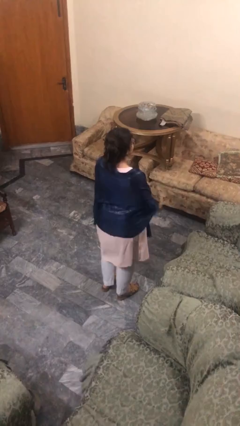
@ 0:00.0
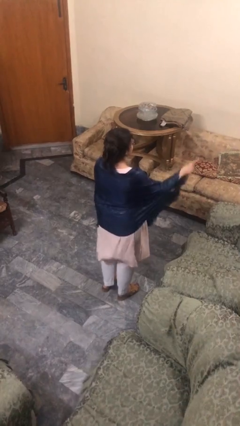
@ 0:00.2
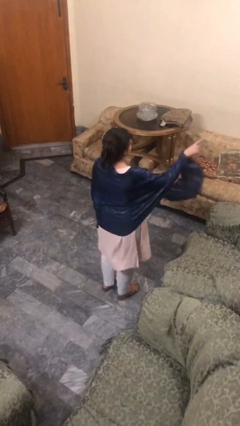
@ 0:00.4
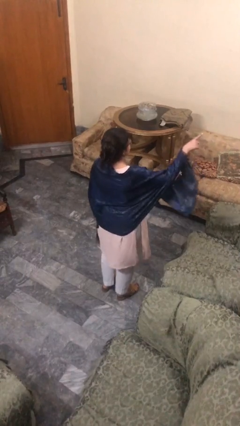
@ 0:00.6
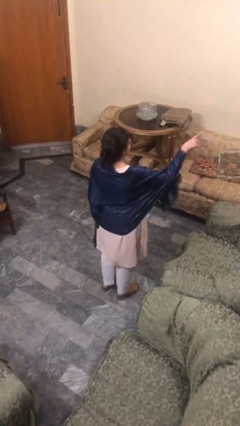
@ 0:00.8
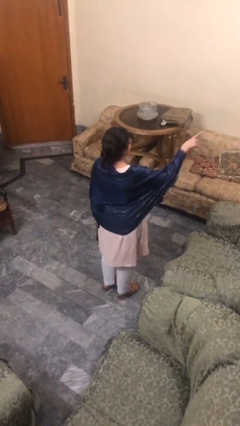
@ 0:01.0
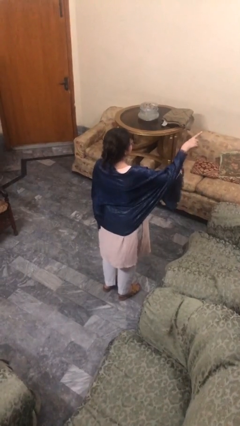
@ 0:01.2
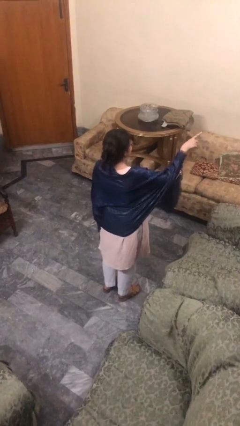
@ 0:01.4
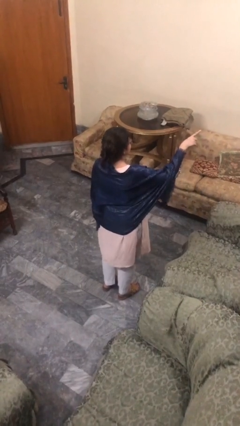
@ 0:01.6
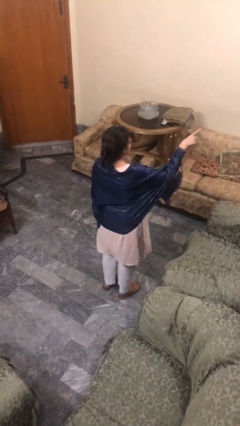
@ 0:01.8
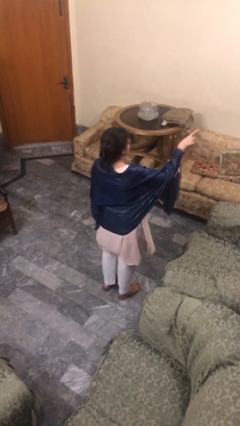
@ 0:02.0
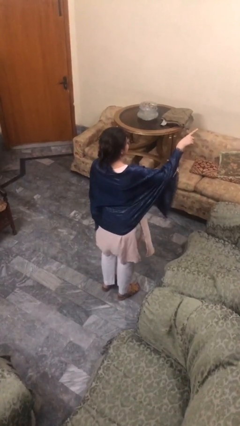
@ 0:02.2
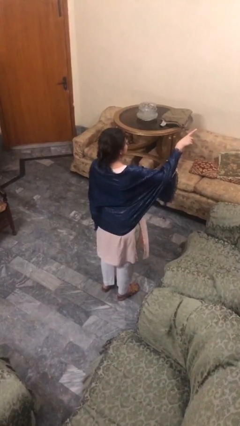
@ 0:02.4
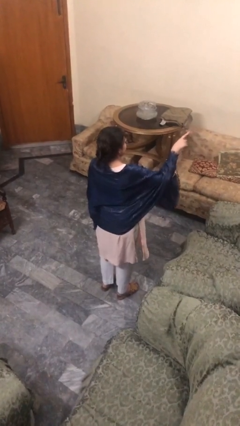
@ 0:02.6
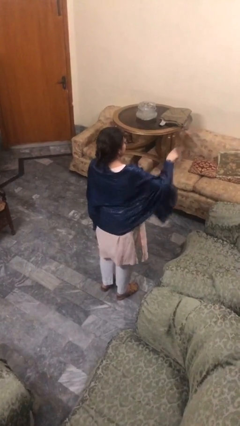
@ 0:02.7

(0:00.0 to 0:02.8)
person points at person

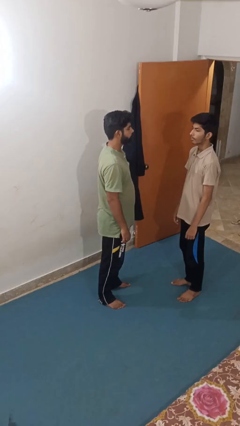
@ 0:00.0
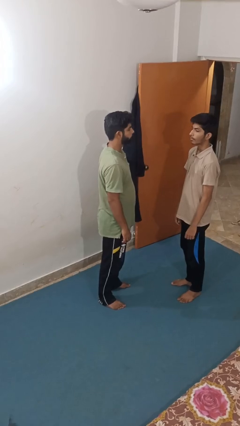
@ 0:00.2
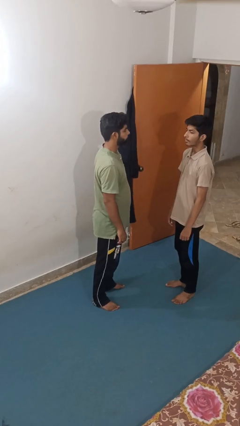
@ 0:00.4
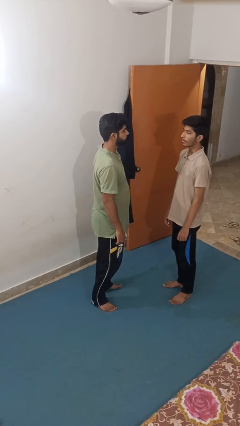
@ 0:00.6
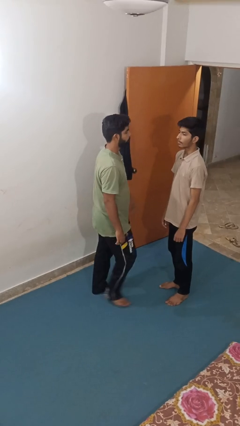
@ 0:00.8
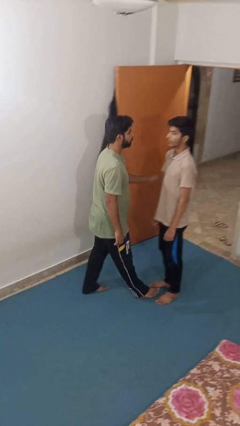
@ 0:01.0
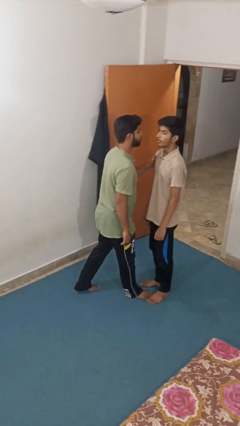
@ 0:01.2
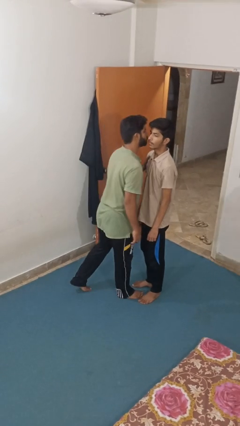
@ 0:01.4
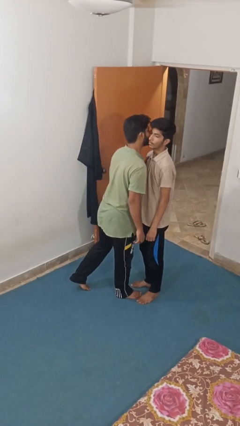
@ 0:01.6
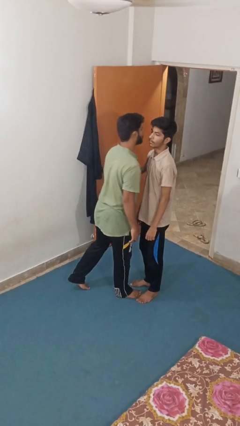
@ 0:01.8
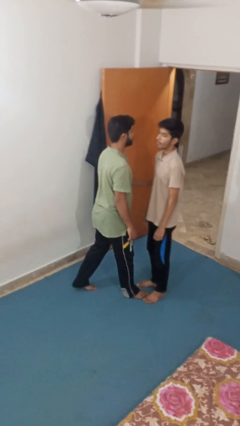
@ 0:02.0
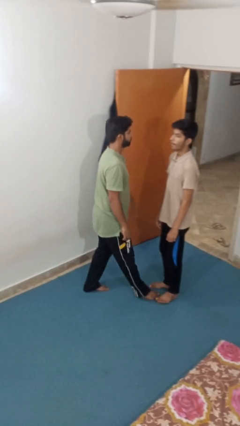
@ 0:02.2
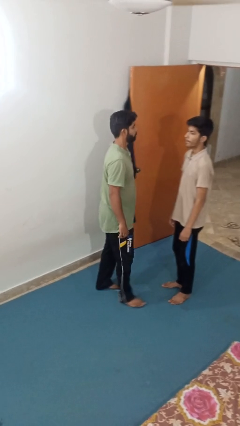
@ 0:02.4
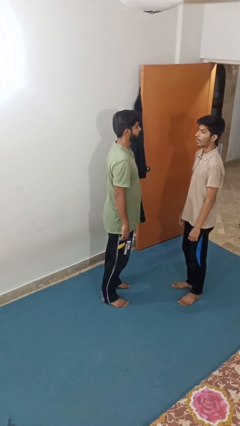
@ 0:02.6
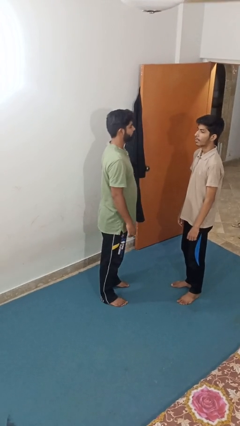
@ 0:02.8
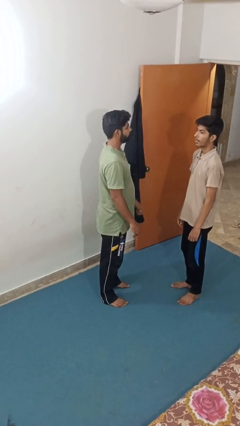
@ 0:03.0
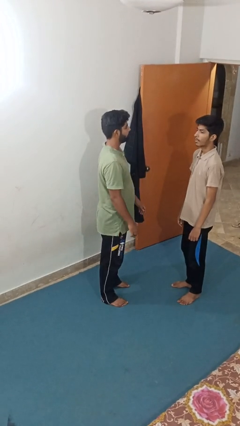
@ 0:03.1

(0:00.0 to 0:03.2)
person kisses cheek of person

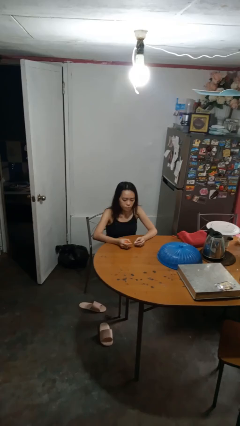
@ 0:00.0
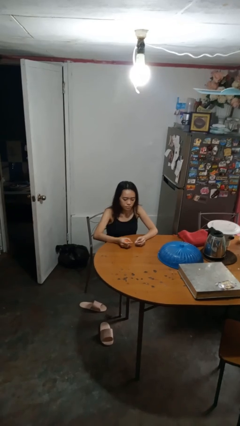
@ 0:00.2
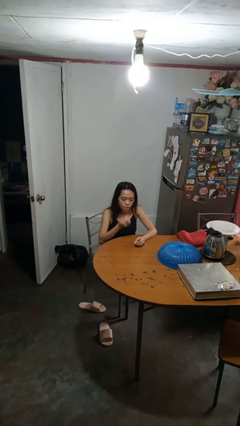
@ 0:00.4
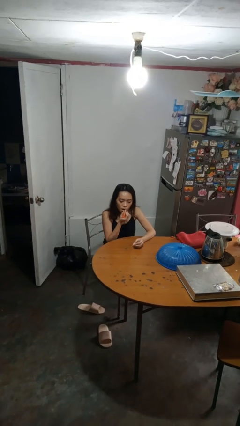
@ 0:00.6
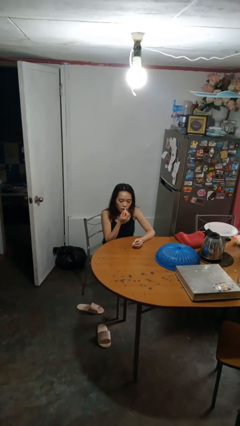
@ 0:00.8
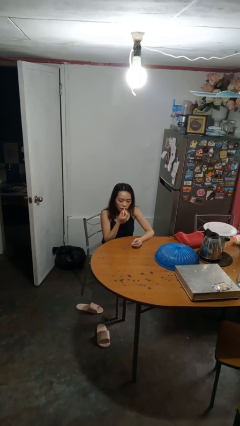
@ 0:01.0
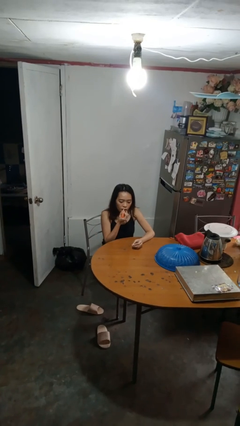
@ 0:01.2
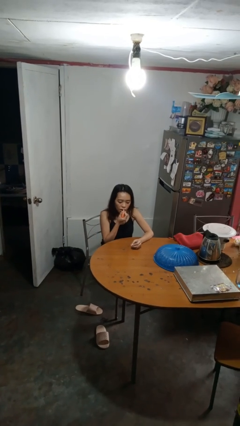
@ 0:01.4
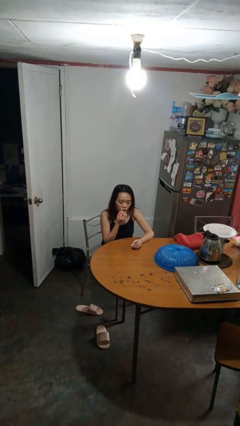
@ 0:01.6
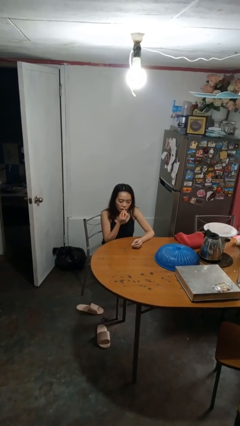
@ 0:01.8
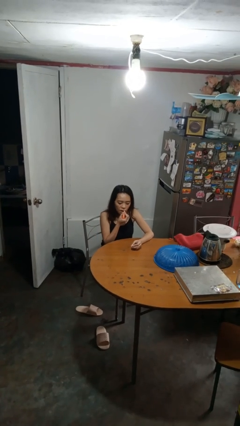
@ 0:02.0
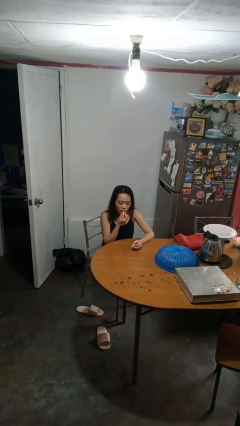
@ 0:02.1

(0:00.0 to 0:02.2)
person applies lip makeup

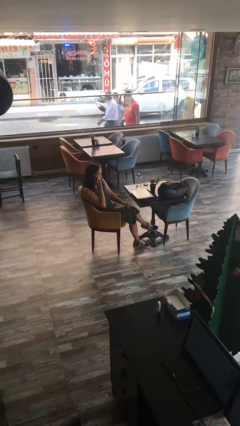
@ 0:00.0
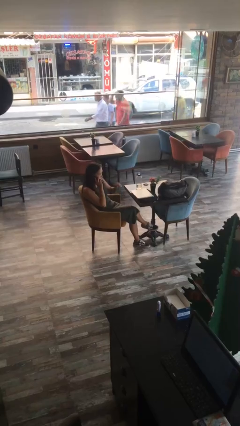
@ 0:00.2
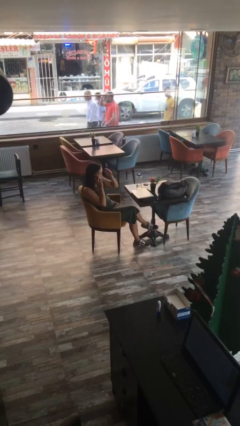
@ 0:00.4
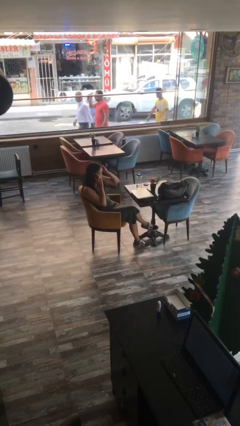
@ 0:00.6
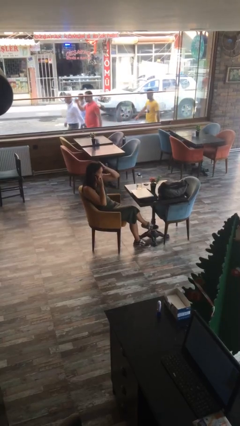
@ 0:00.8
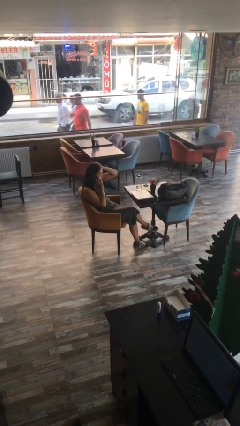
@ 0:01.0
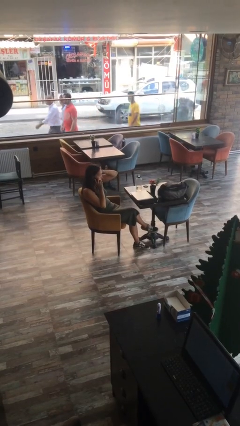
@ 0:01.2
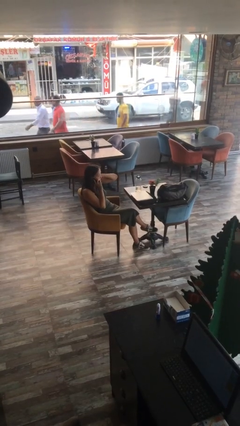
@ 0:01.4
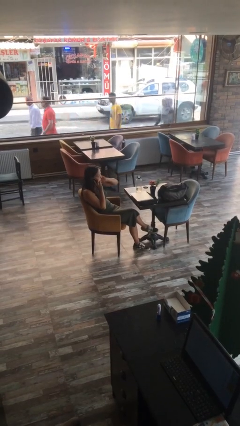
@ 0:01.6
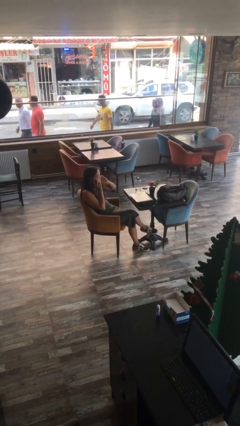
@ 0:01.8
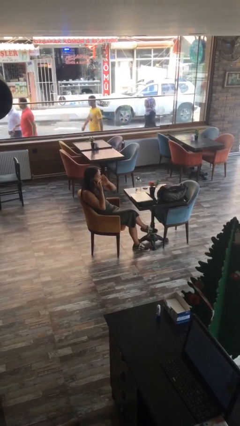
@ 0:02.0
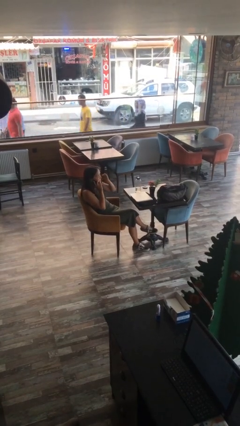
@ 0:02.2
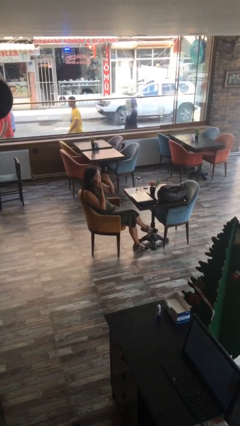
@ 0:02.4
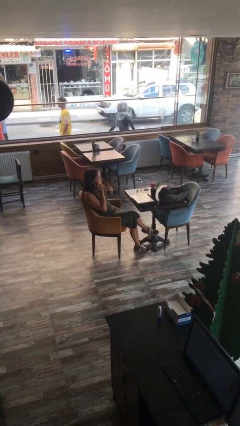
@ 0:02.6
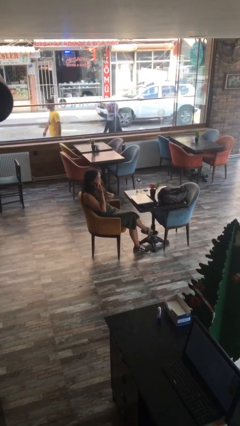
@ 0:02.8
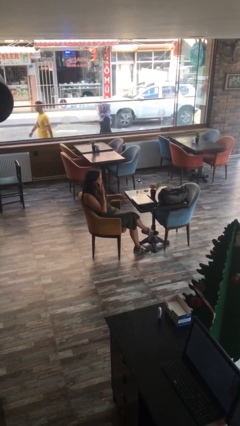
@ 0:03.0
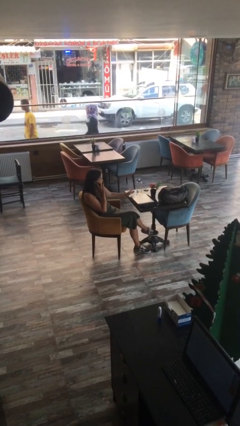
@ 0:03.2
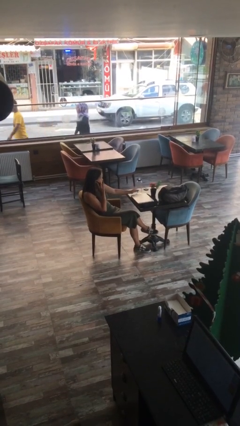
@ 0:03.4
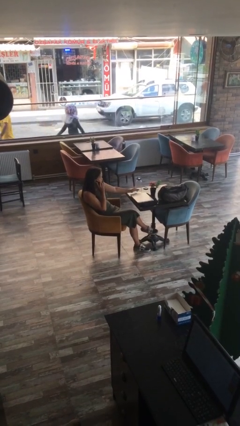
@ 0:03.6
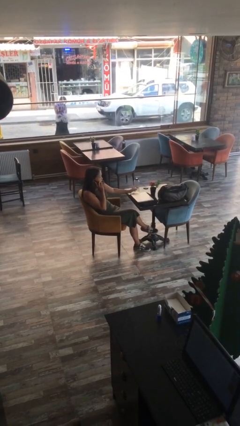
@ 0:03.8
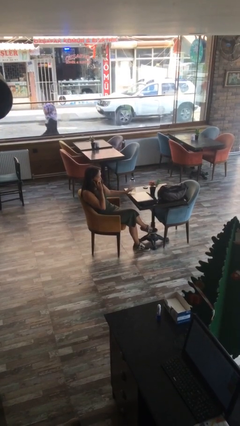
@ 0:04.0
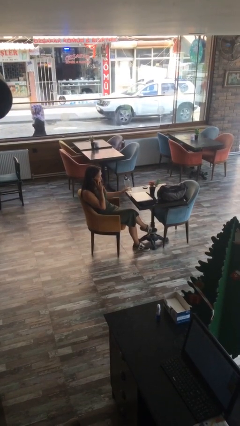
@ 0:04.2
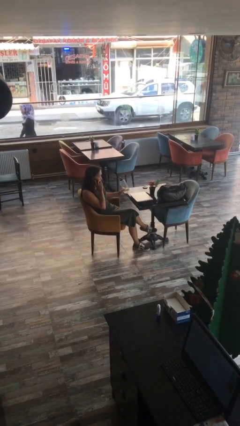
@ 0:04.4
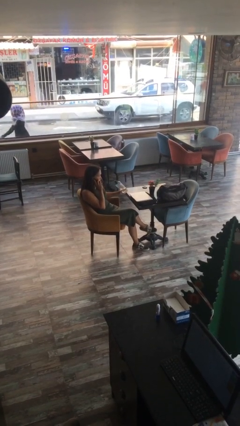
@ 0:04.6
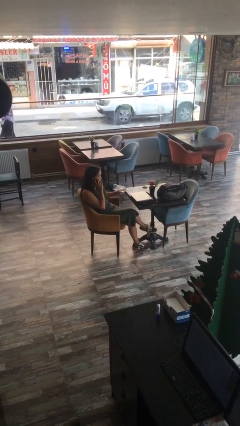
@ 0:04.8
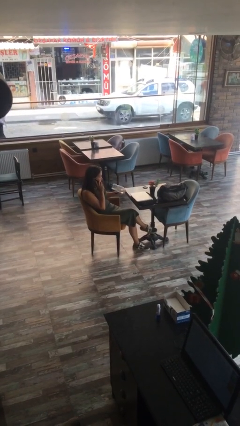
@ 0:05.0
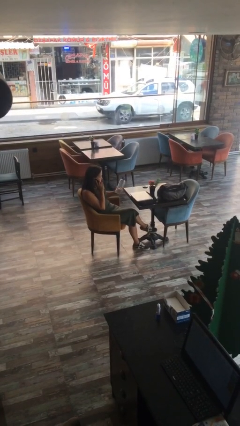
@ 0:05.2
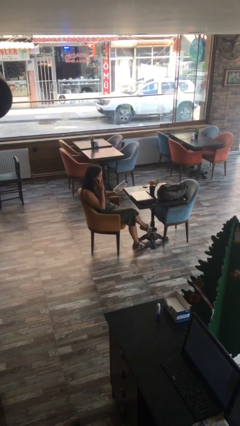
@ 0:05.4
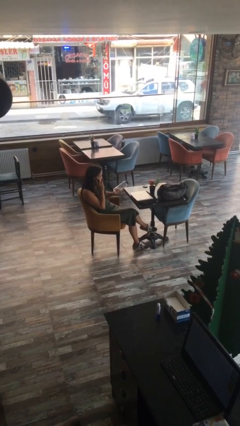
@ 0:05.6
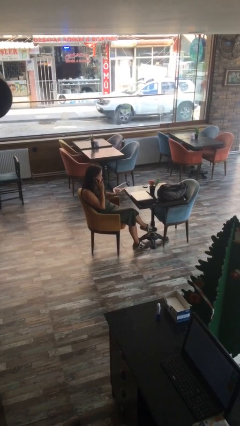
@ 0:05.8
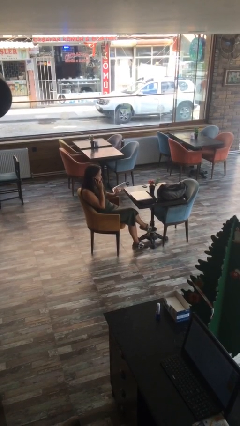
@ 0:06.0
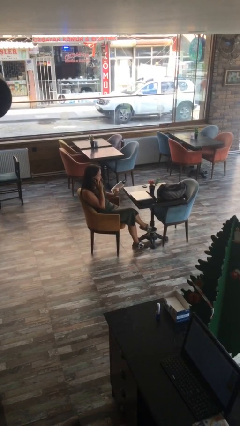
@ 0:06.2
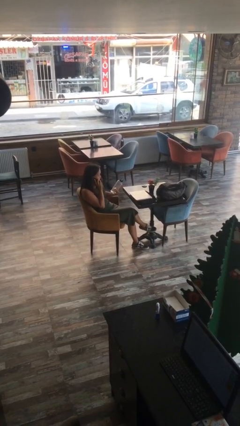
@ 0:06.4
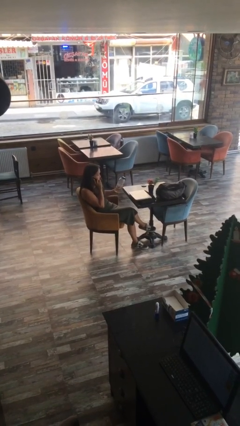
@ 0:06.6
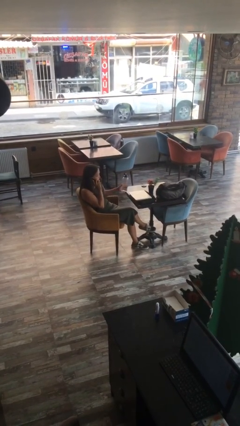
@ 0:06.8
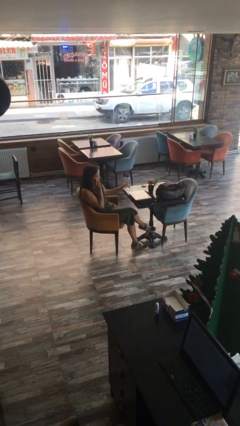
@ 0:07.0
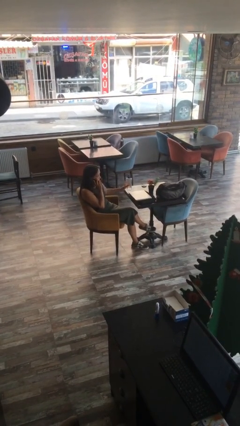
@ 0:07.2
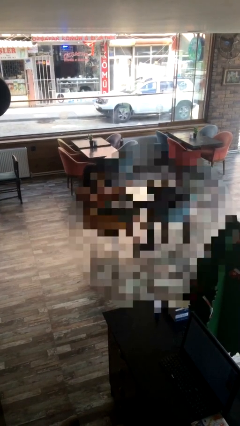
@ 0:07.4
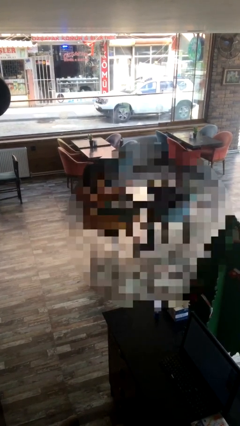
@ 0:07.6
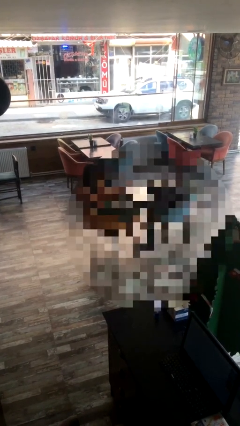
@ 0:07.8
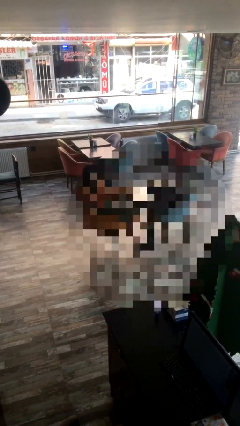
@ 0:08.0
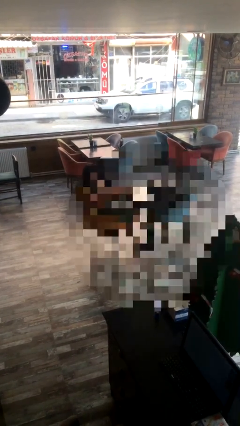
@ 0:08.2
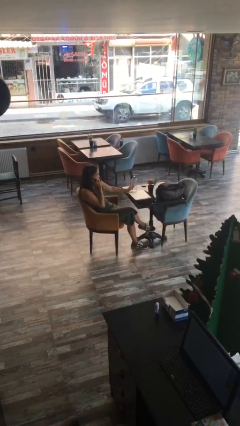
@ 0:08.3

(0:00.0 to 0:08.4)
person talks on phone

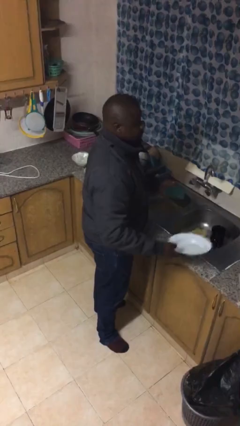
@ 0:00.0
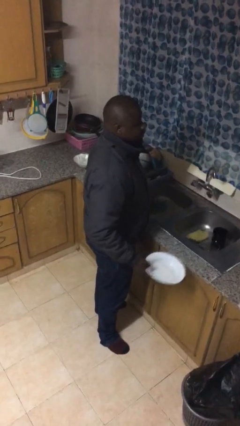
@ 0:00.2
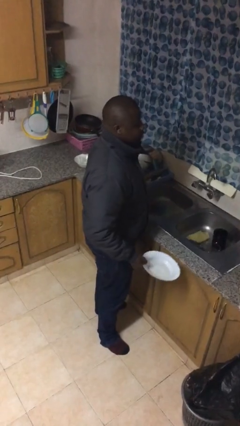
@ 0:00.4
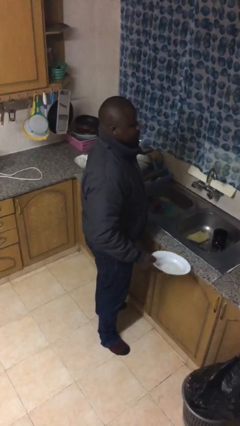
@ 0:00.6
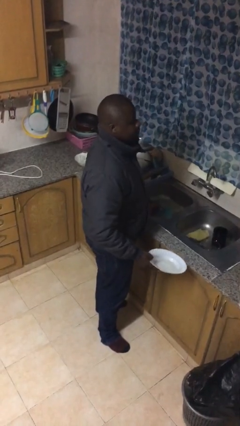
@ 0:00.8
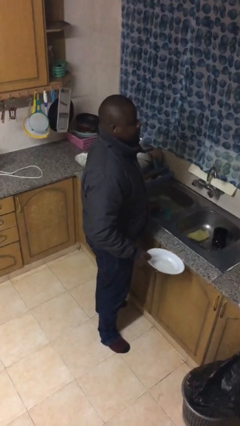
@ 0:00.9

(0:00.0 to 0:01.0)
person washes dish
